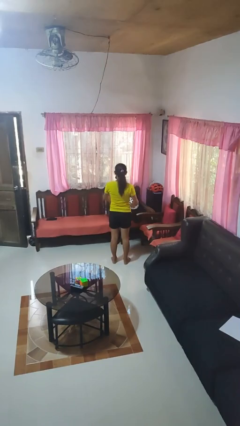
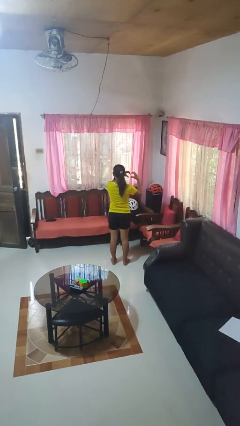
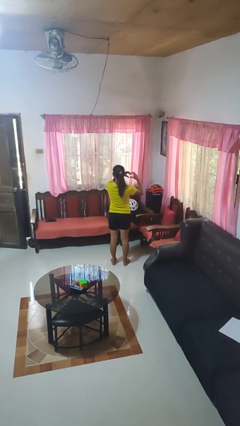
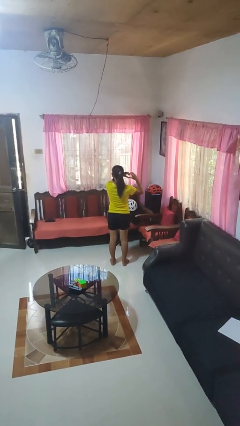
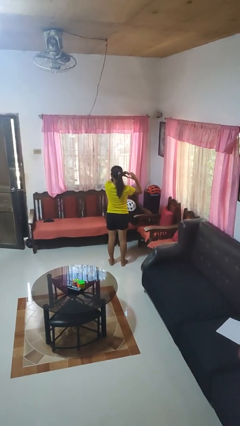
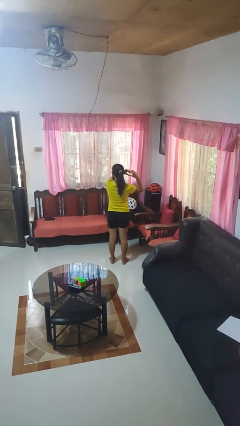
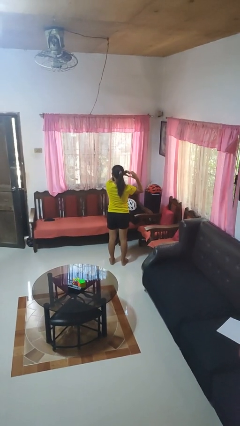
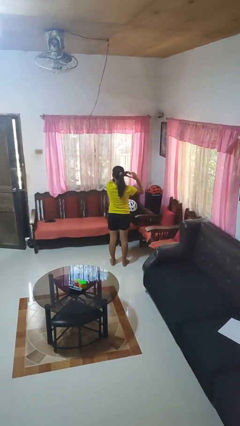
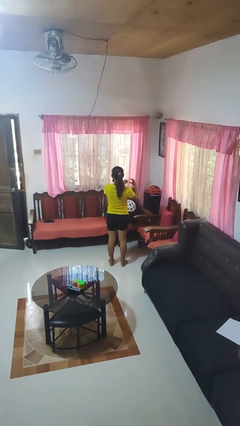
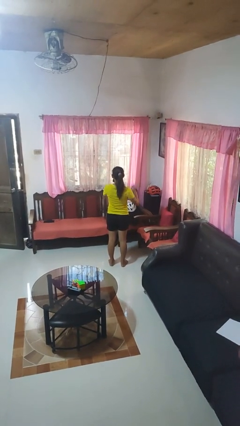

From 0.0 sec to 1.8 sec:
person gestures heart

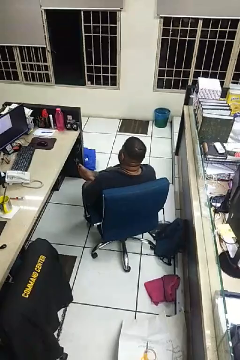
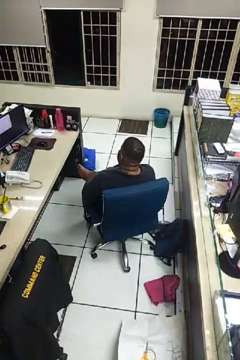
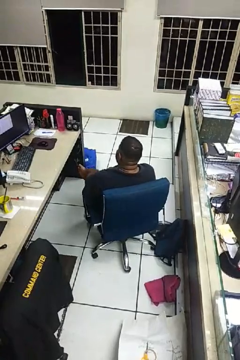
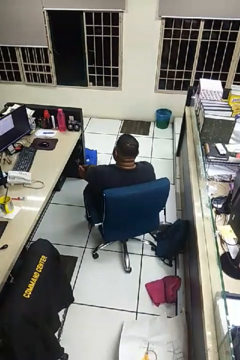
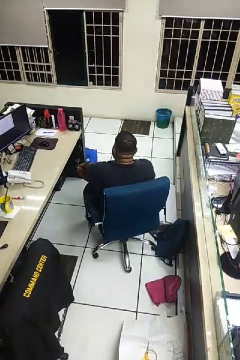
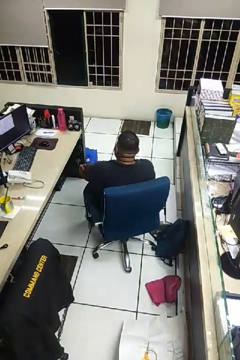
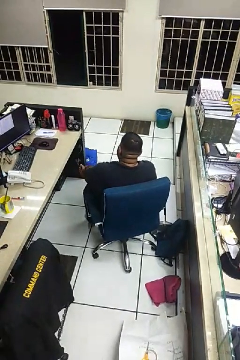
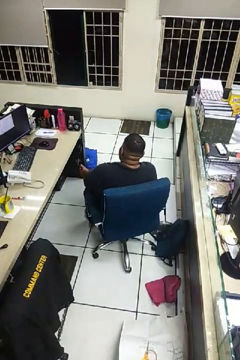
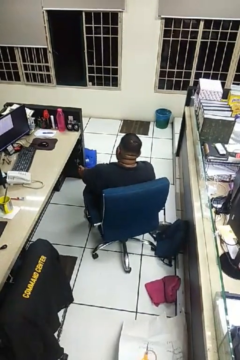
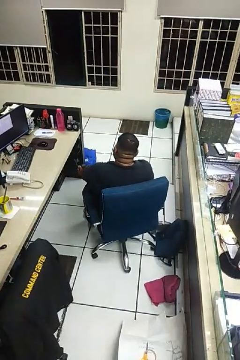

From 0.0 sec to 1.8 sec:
person rubs foot

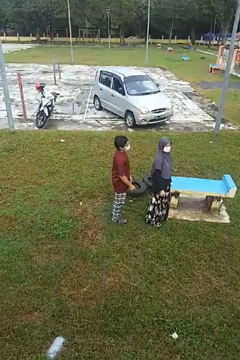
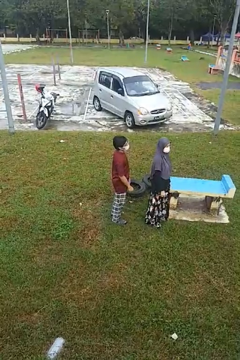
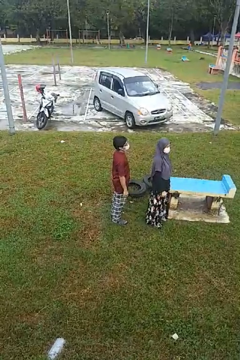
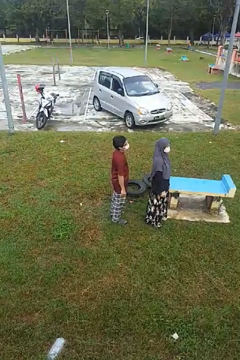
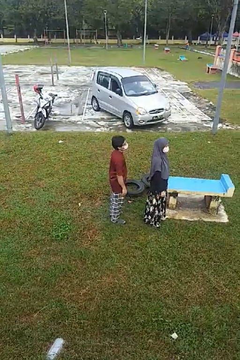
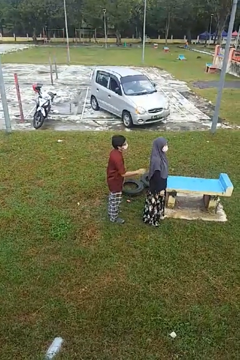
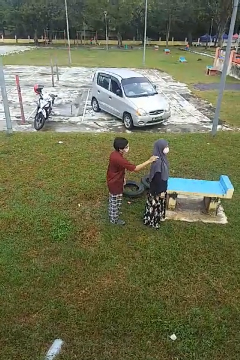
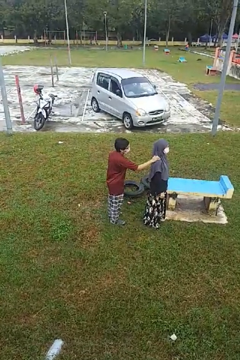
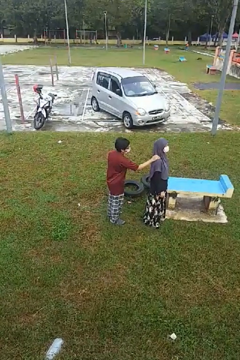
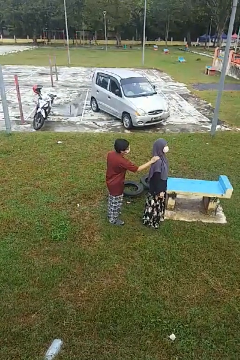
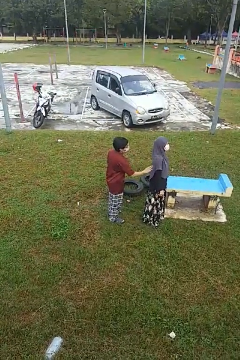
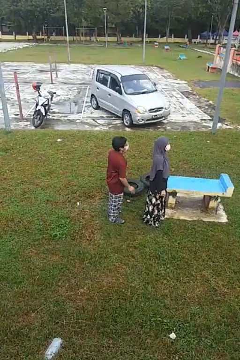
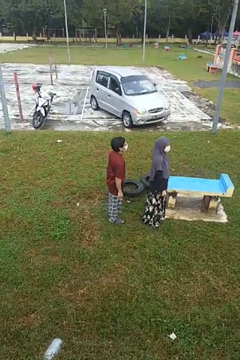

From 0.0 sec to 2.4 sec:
person touches back of person

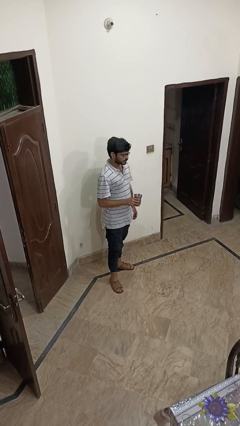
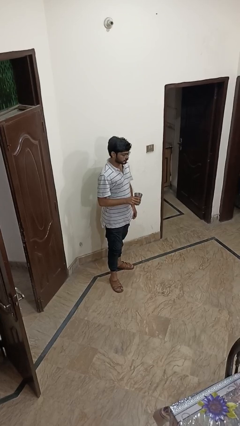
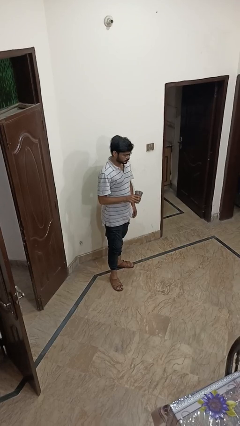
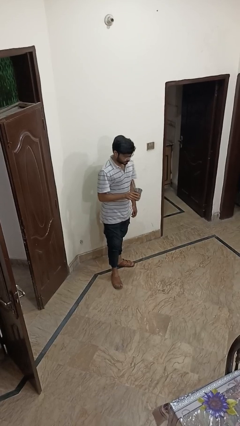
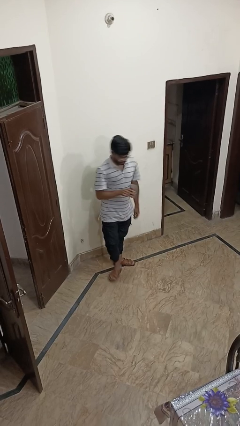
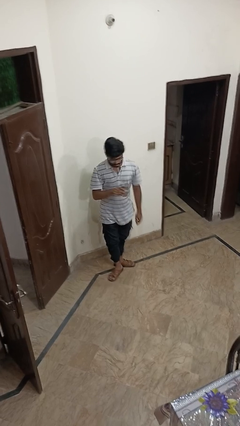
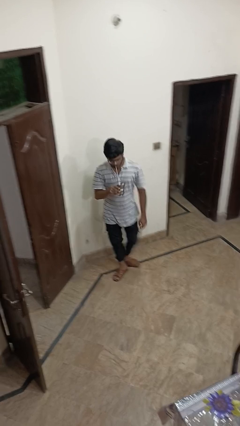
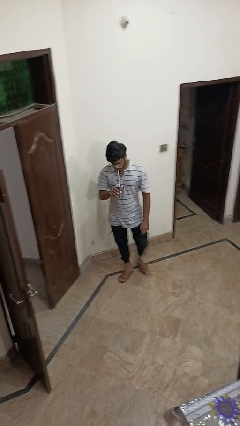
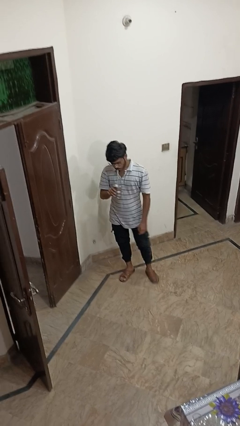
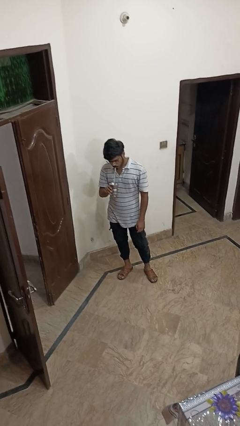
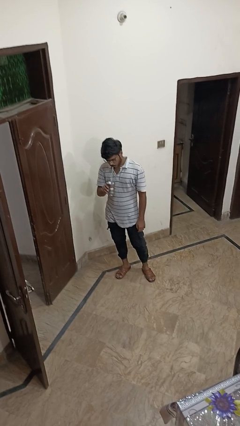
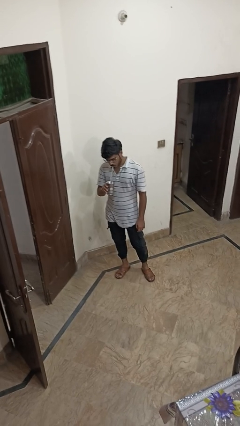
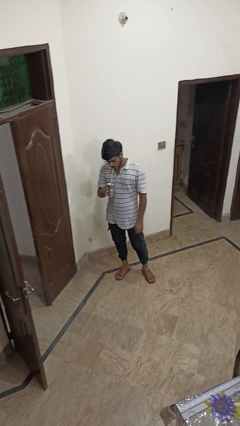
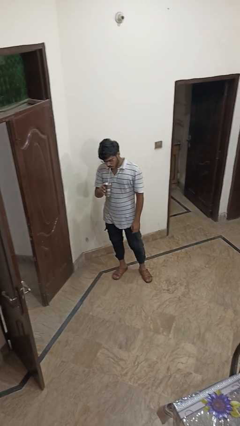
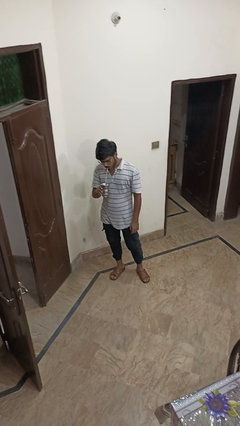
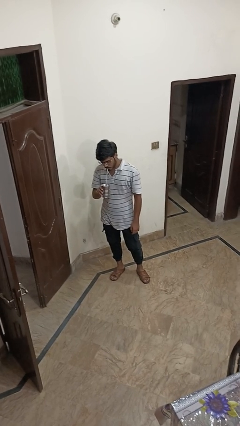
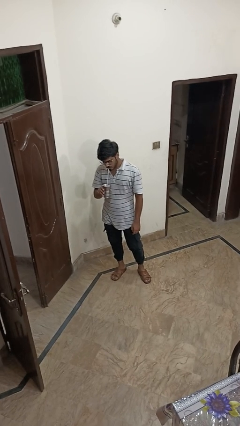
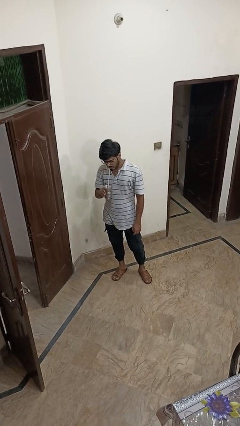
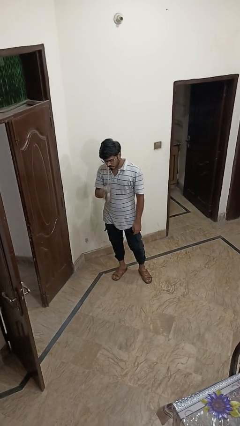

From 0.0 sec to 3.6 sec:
person drinks from straw

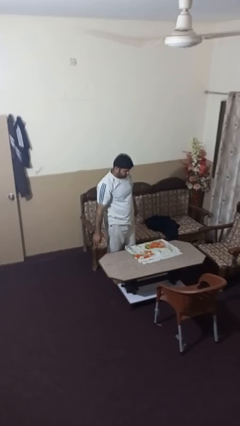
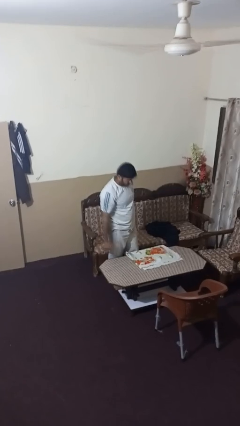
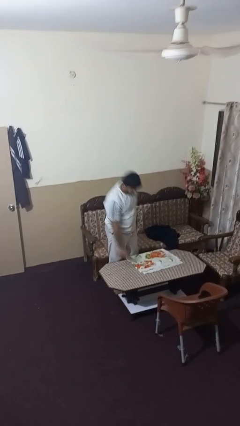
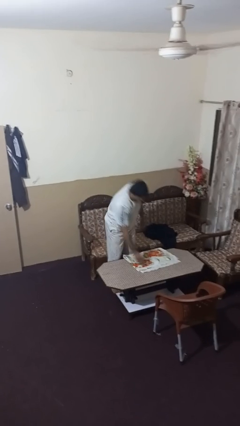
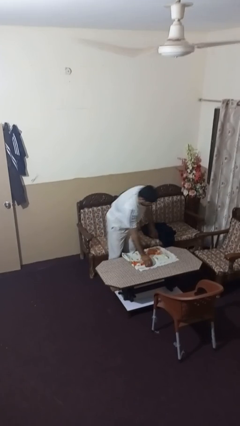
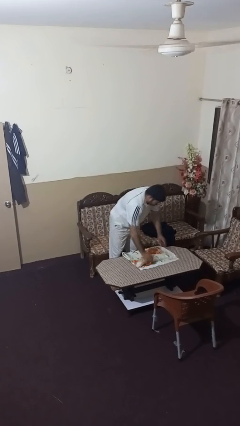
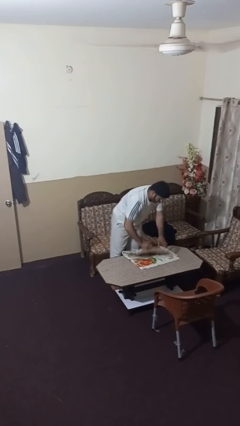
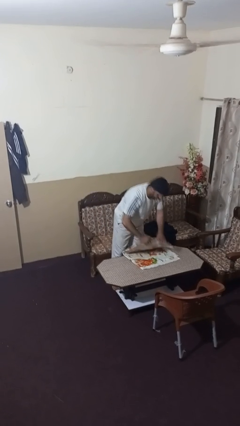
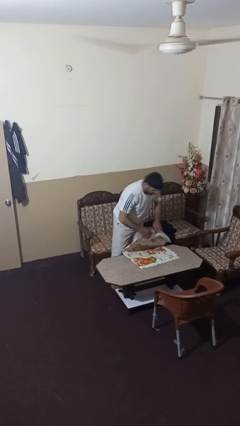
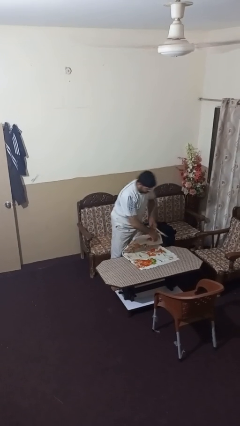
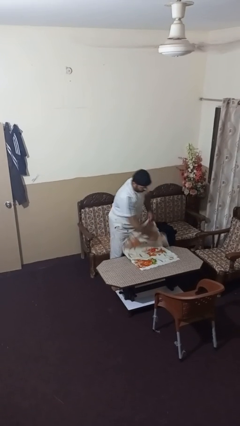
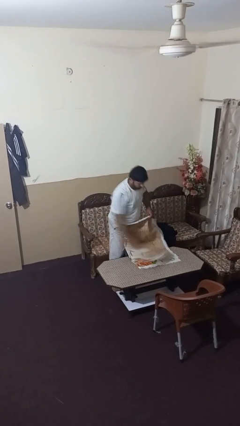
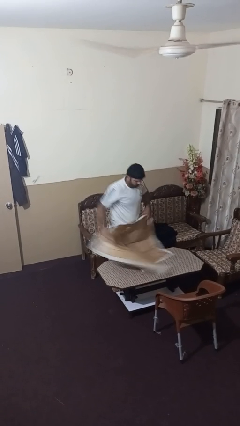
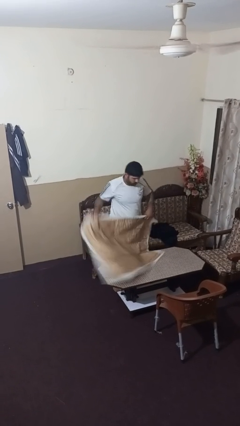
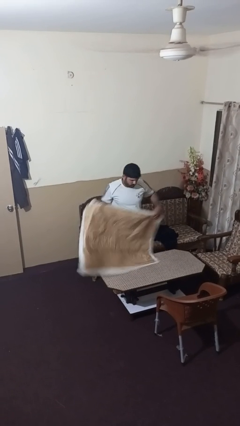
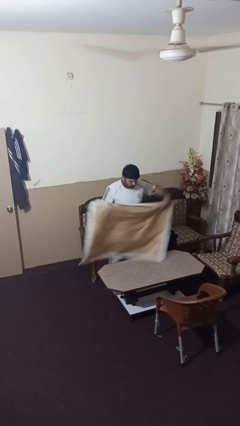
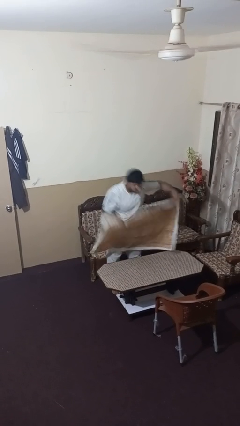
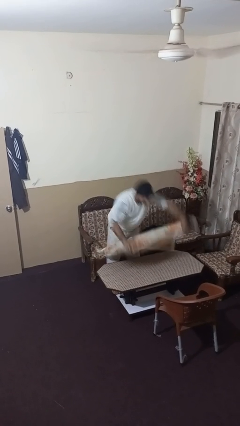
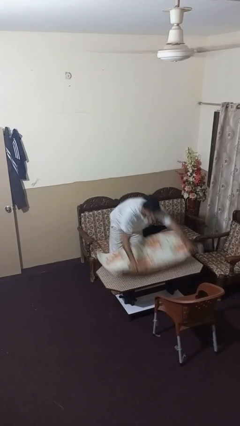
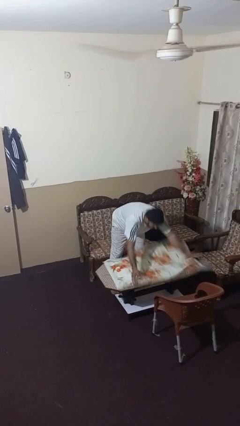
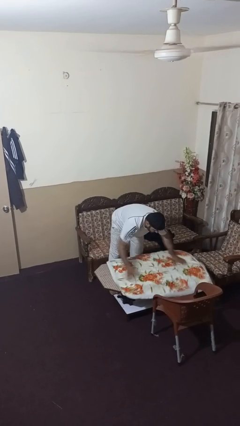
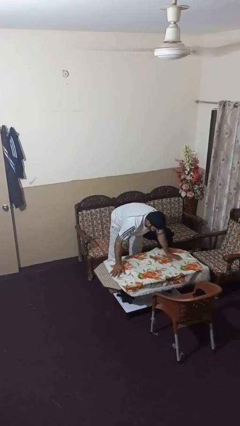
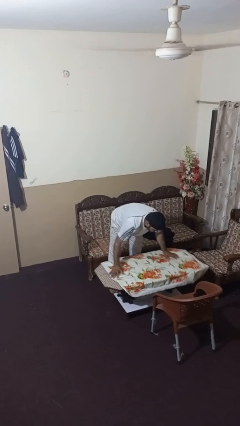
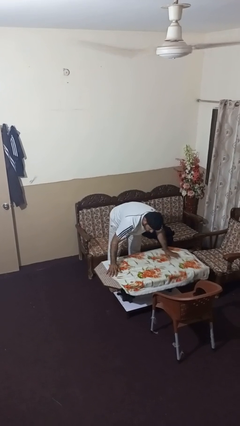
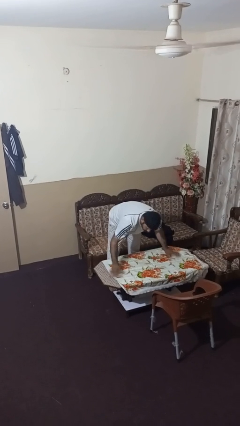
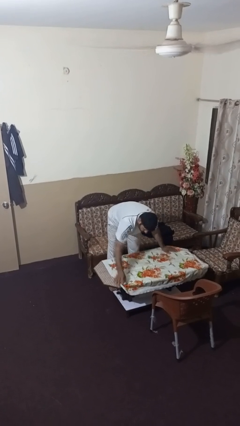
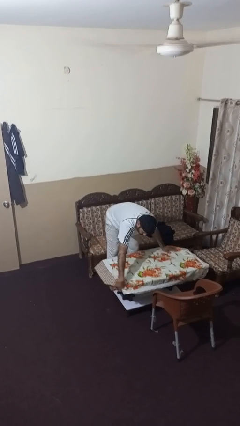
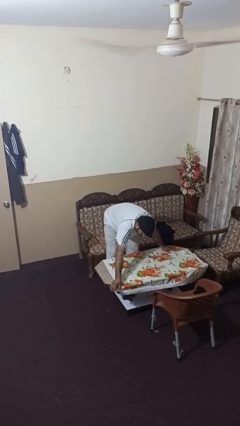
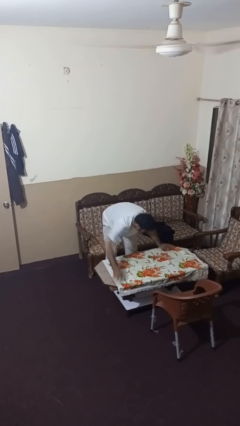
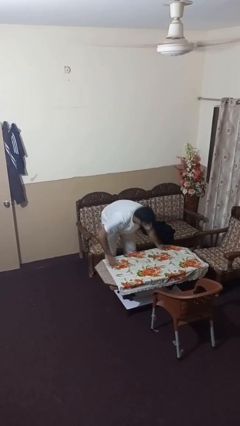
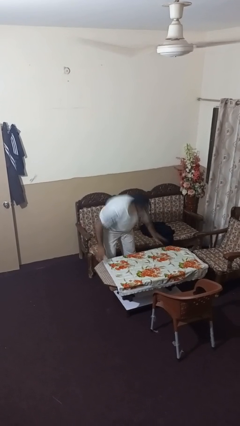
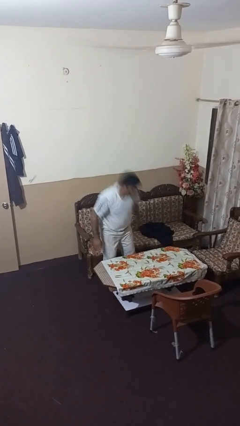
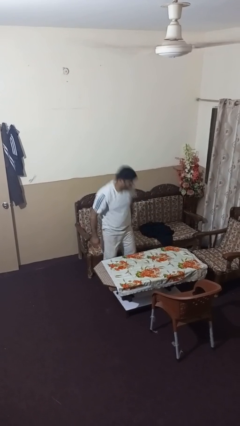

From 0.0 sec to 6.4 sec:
person spreads tablecloth

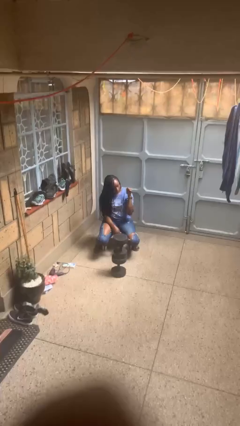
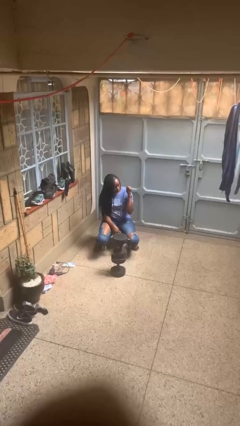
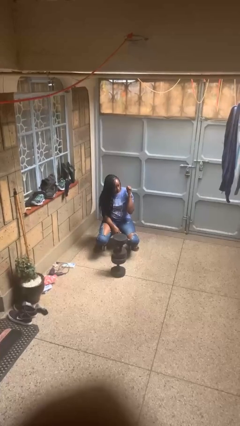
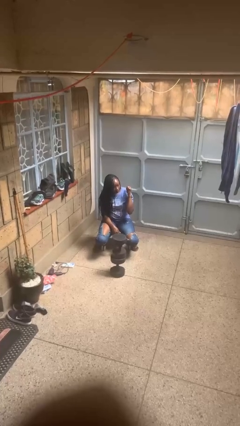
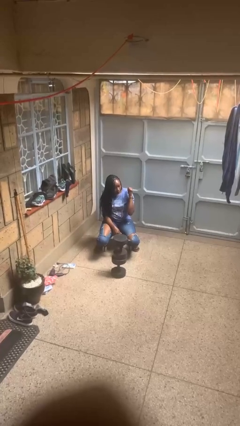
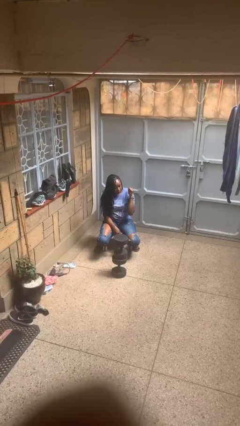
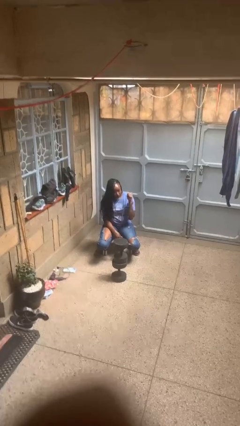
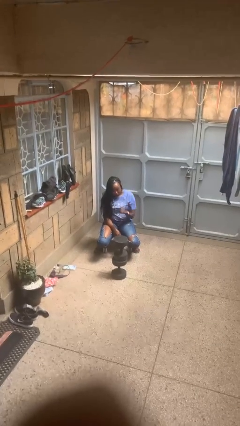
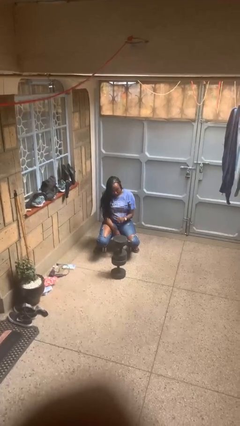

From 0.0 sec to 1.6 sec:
person gestures behind me

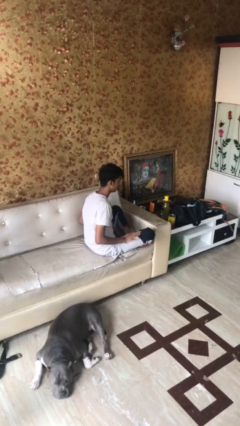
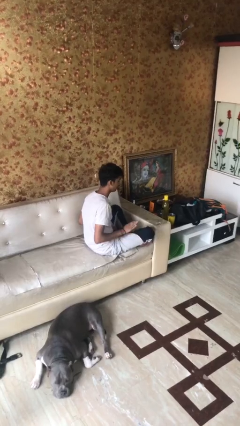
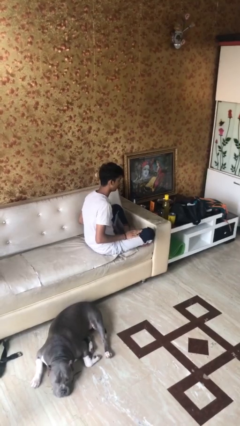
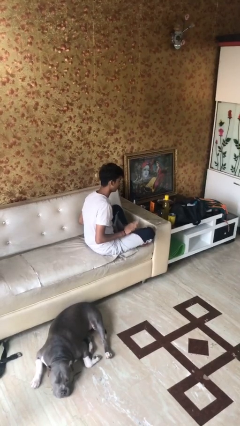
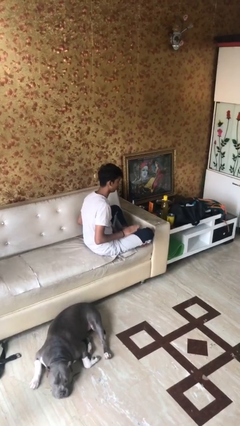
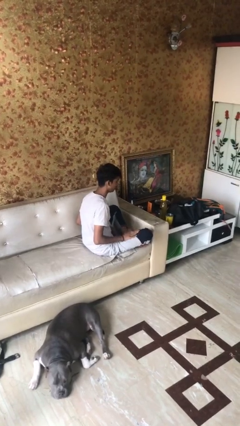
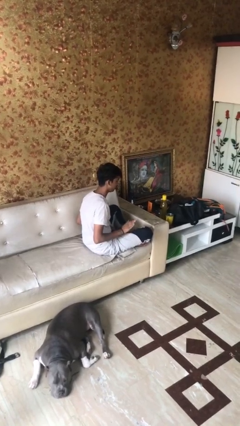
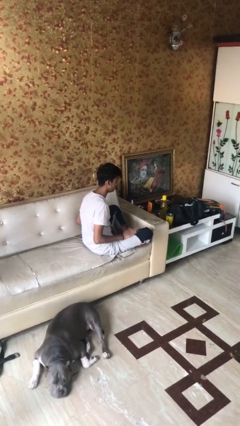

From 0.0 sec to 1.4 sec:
person slaps hands on thighs
